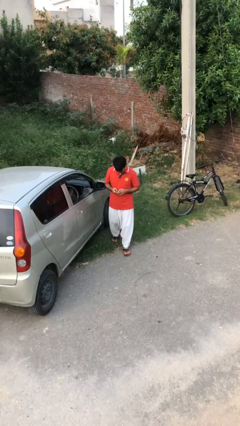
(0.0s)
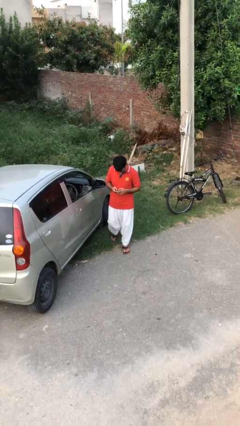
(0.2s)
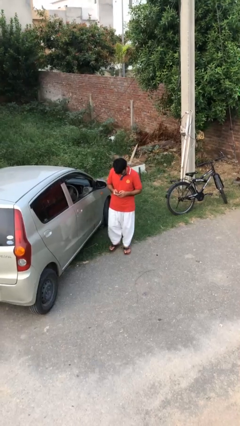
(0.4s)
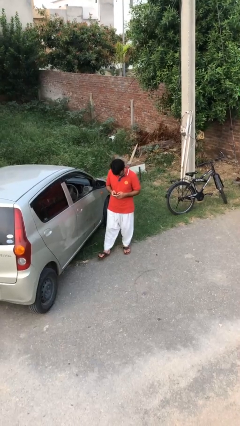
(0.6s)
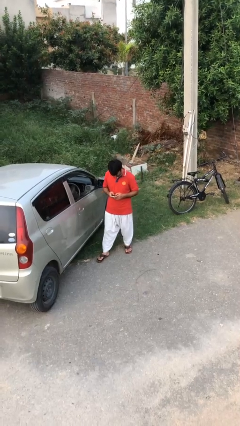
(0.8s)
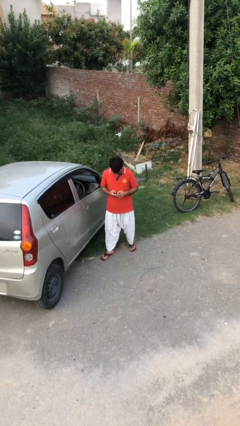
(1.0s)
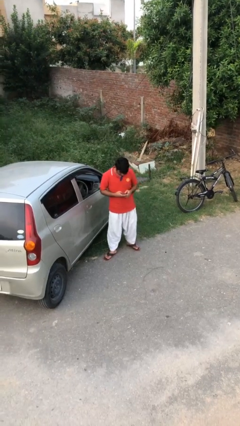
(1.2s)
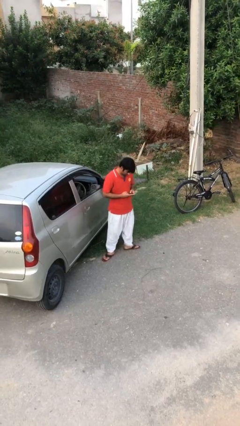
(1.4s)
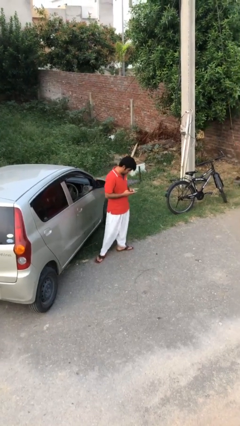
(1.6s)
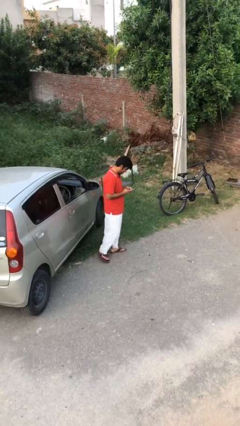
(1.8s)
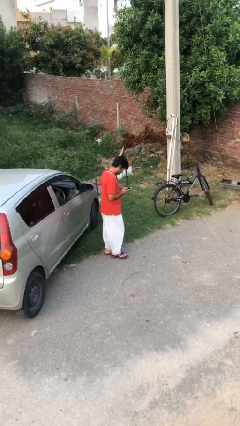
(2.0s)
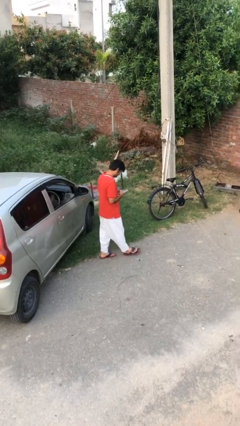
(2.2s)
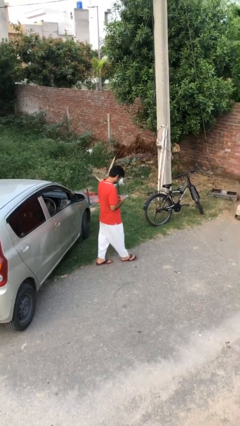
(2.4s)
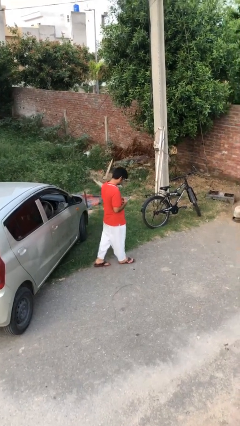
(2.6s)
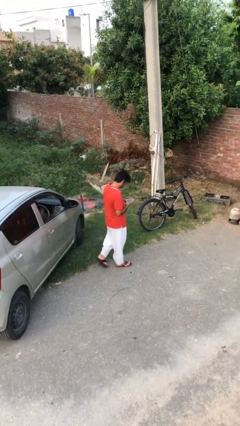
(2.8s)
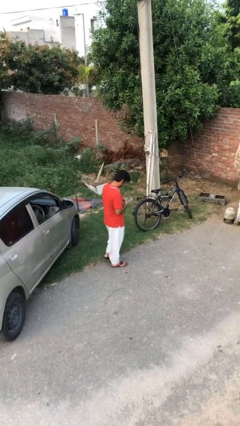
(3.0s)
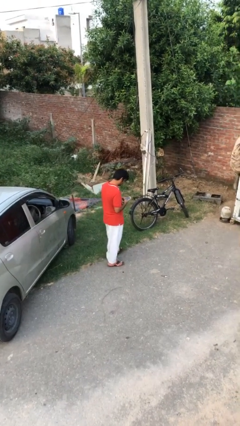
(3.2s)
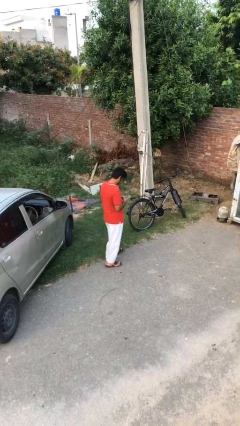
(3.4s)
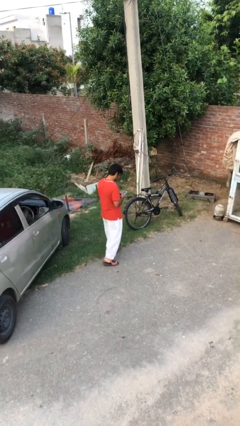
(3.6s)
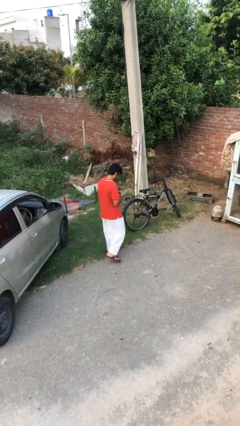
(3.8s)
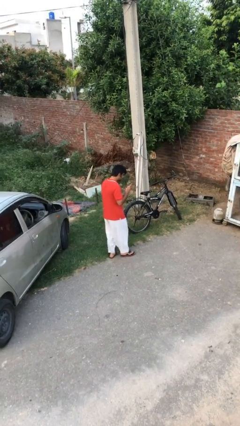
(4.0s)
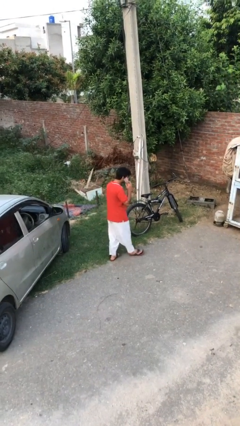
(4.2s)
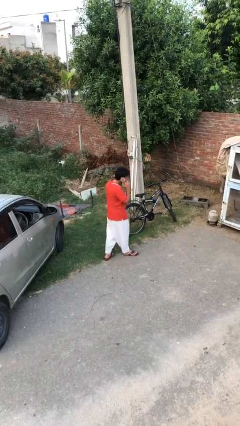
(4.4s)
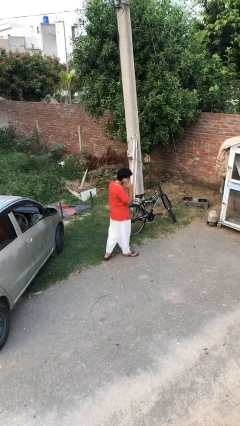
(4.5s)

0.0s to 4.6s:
person texts on phone

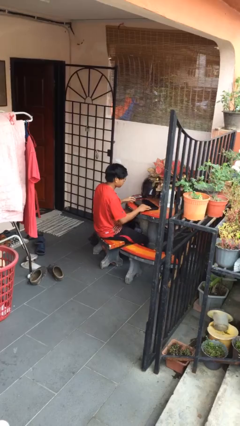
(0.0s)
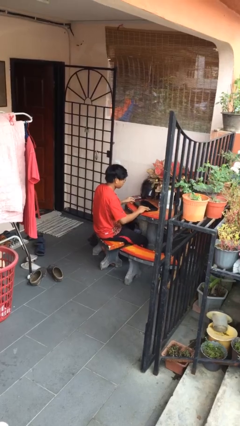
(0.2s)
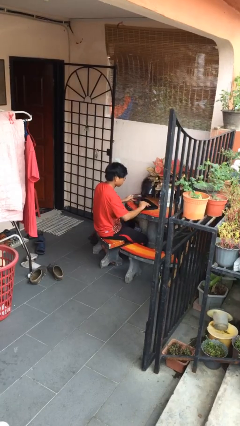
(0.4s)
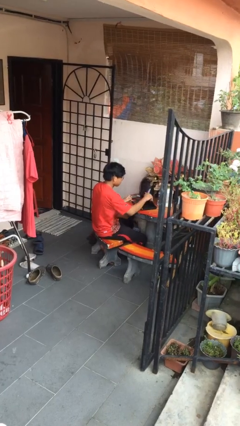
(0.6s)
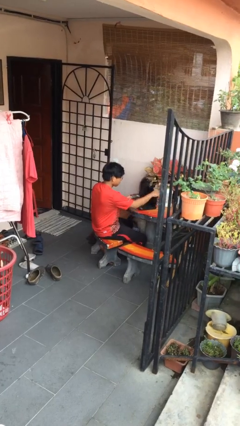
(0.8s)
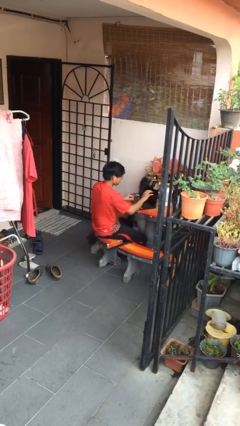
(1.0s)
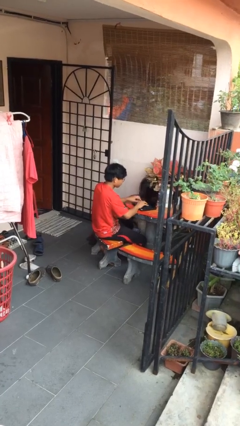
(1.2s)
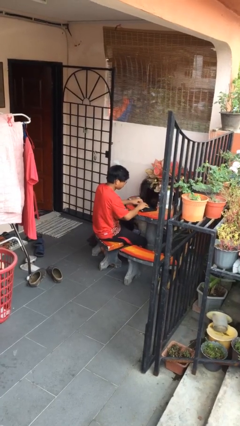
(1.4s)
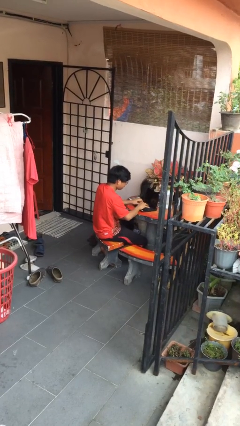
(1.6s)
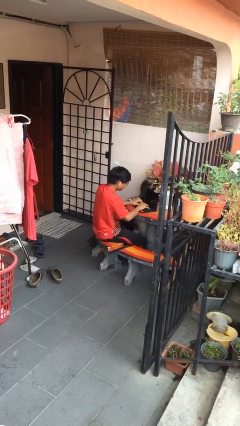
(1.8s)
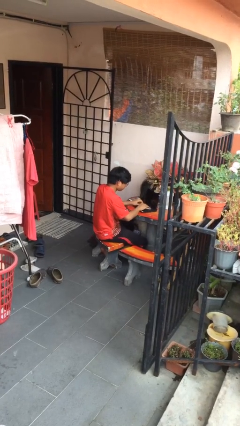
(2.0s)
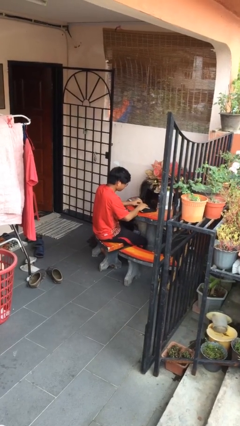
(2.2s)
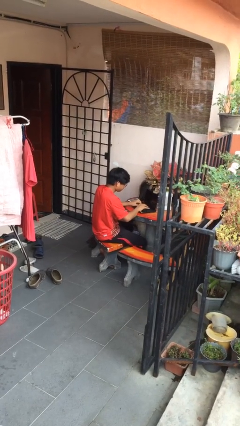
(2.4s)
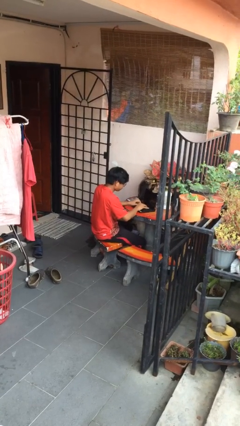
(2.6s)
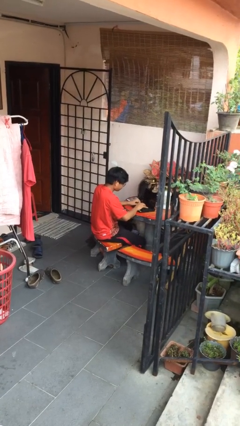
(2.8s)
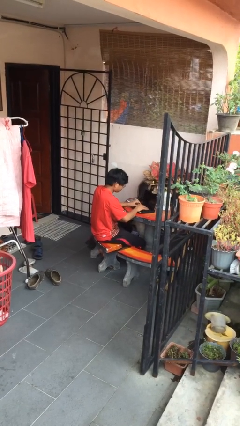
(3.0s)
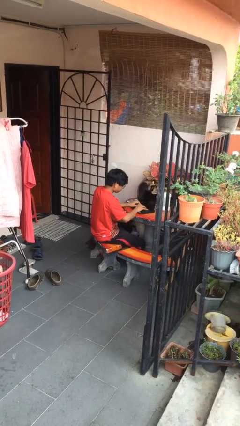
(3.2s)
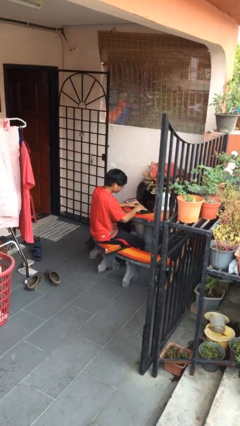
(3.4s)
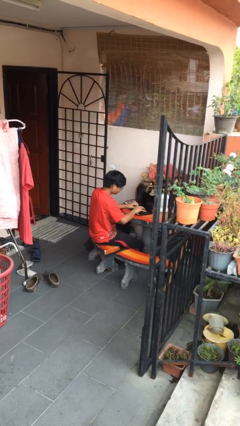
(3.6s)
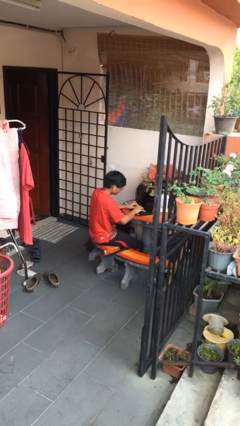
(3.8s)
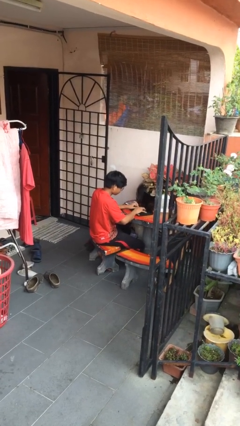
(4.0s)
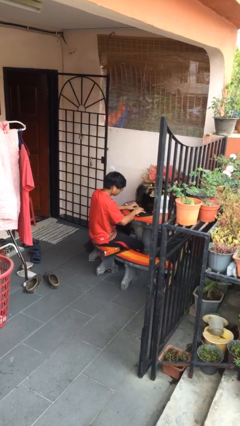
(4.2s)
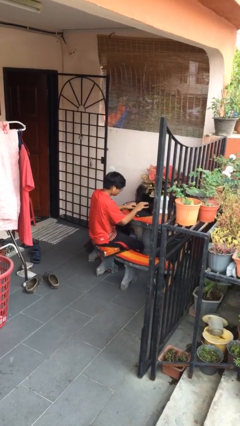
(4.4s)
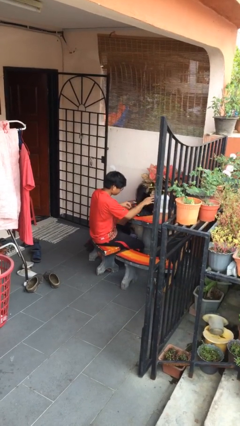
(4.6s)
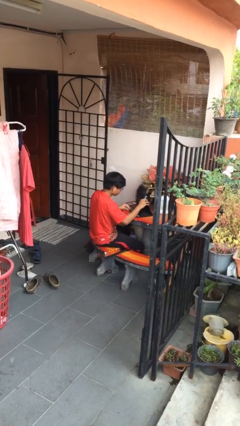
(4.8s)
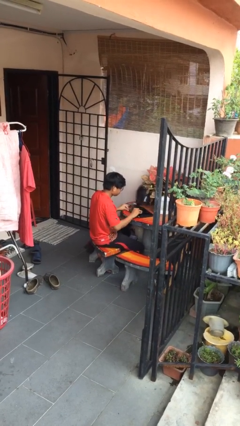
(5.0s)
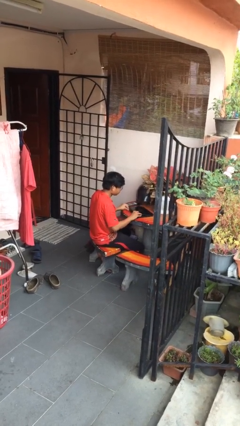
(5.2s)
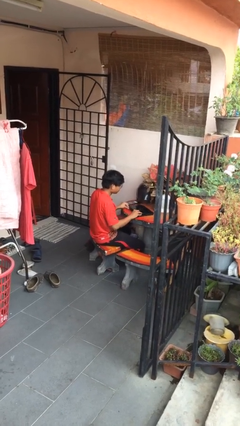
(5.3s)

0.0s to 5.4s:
person interacts with laptop

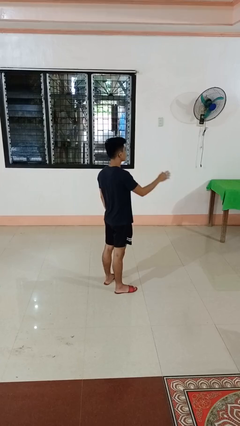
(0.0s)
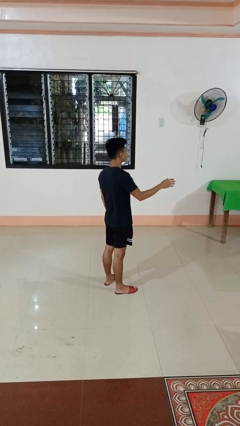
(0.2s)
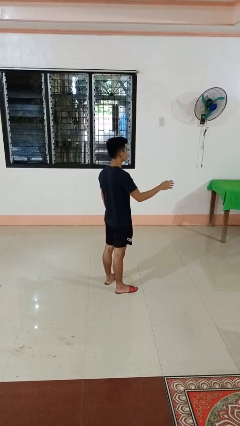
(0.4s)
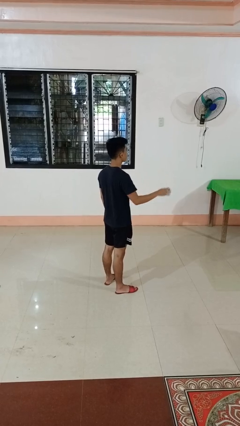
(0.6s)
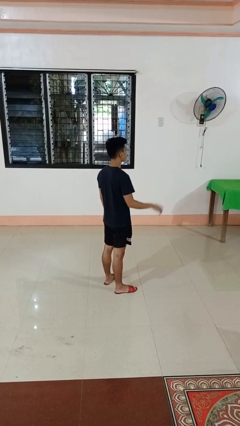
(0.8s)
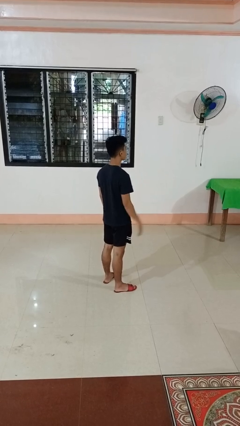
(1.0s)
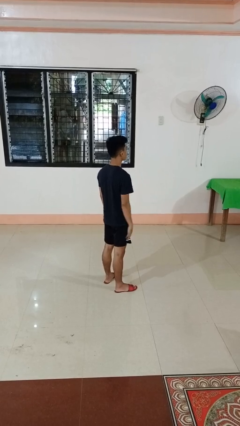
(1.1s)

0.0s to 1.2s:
person gestures swipe right

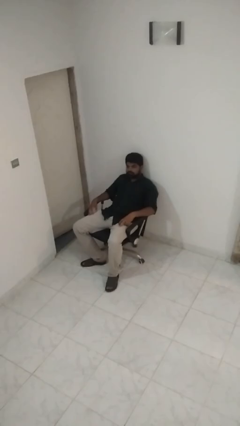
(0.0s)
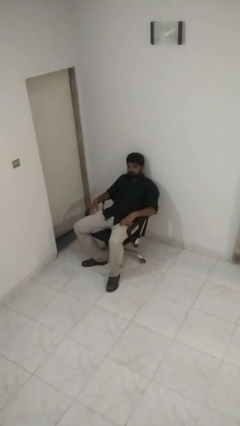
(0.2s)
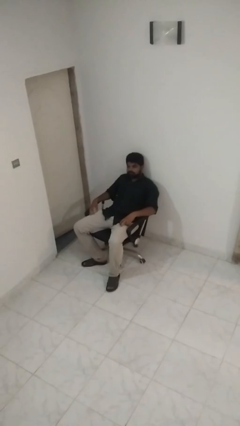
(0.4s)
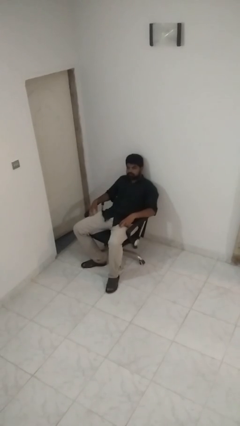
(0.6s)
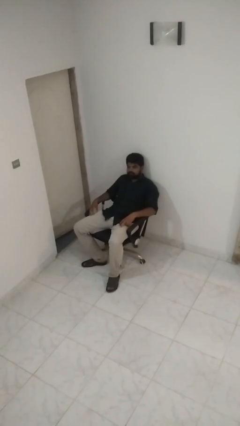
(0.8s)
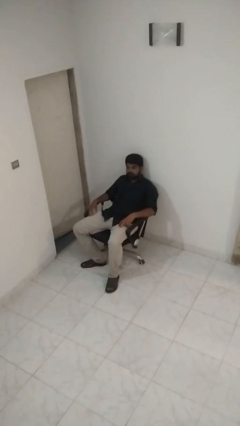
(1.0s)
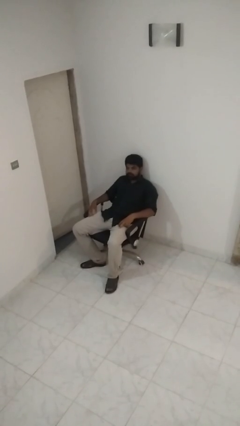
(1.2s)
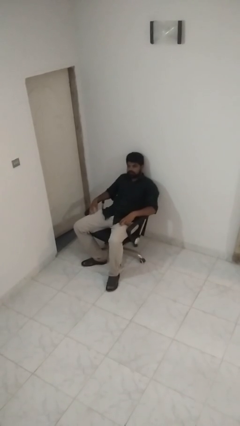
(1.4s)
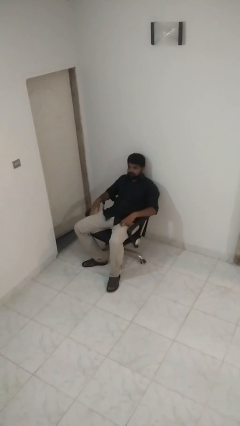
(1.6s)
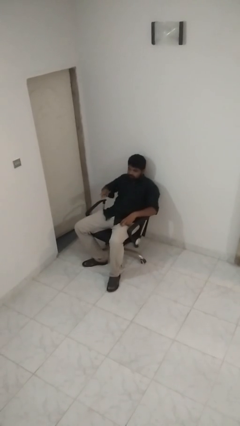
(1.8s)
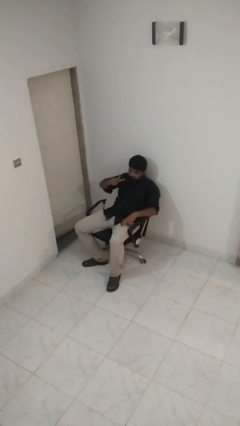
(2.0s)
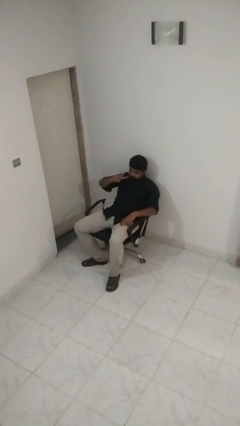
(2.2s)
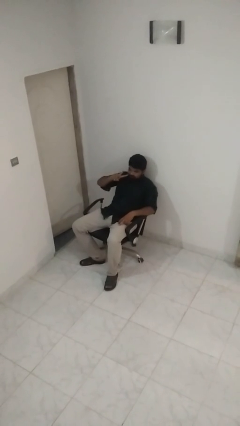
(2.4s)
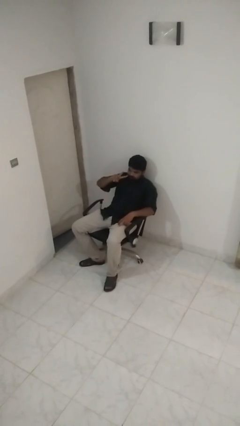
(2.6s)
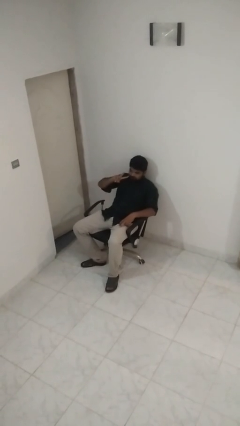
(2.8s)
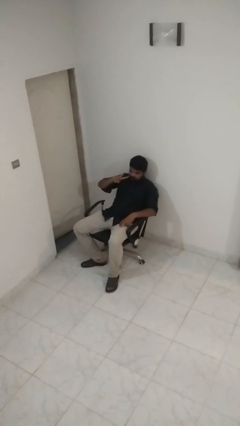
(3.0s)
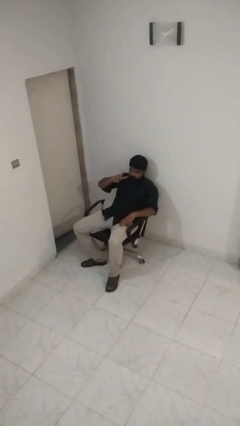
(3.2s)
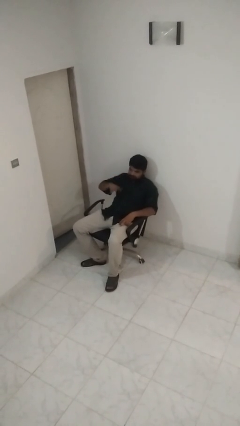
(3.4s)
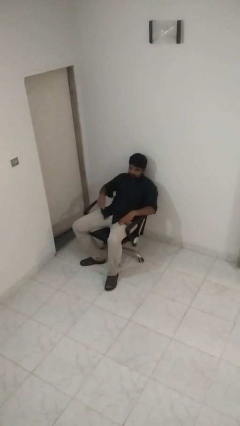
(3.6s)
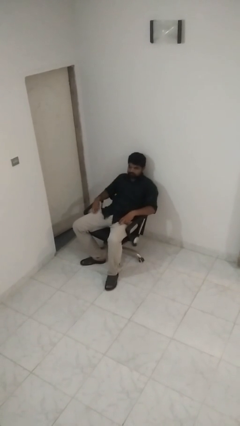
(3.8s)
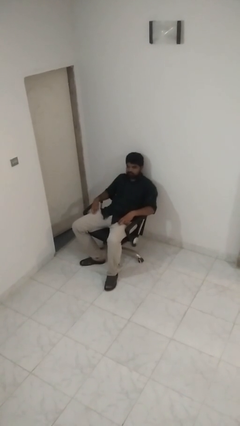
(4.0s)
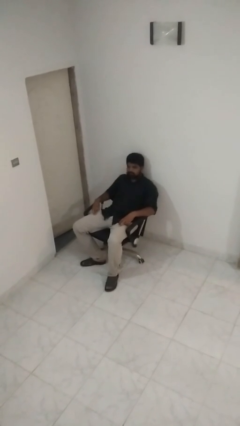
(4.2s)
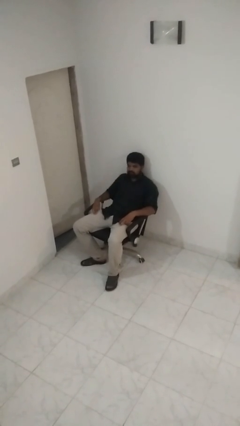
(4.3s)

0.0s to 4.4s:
person gestures peace

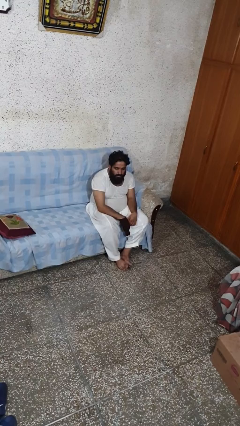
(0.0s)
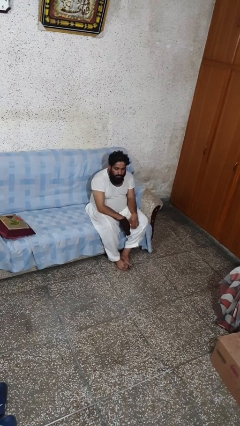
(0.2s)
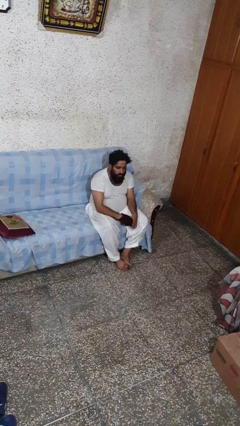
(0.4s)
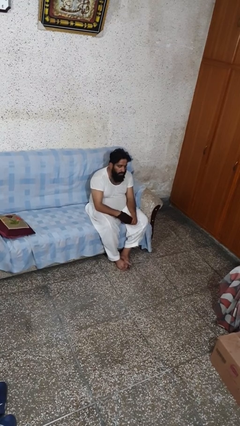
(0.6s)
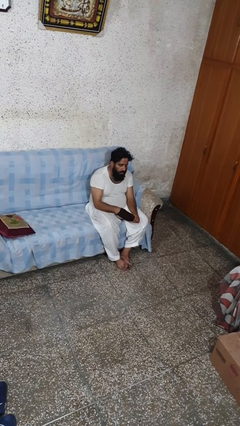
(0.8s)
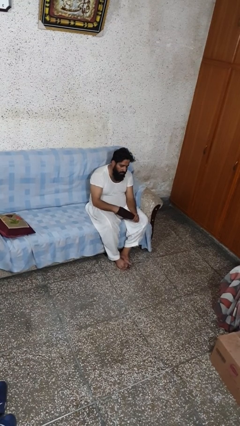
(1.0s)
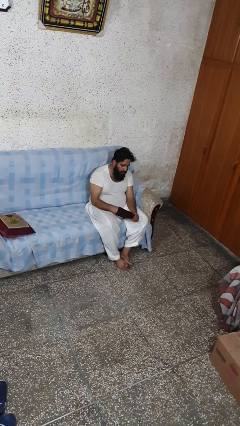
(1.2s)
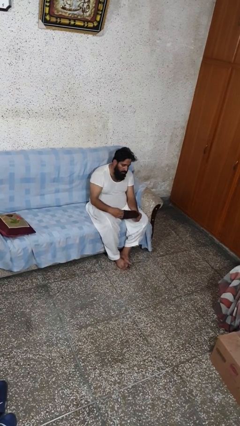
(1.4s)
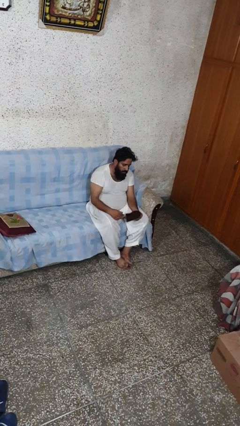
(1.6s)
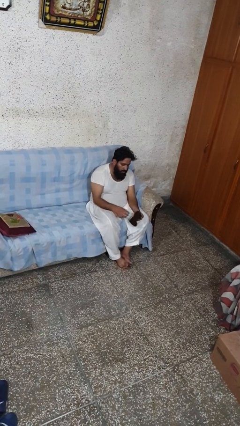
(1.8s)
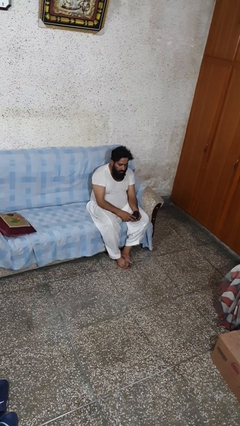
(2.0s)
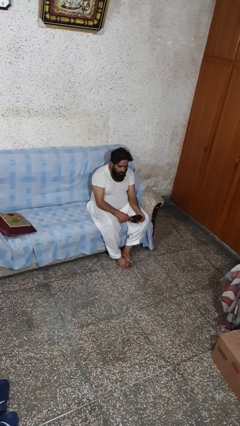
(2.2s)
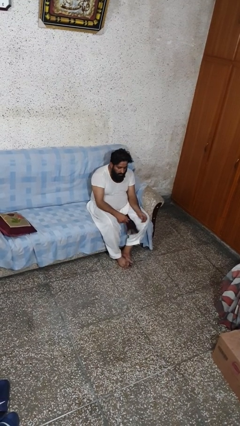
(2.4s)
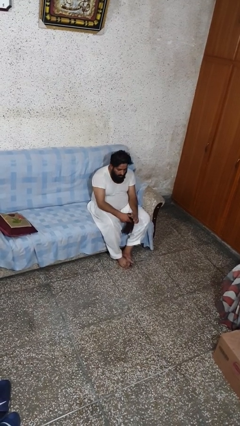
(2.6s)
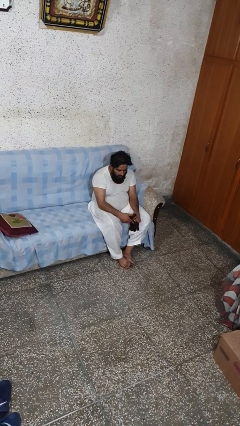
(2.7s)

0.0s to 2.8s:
person takes off gloves
